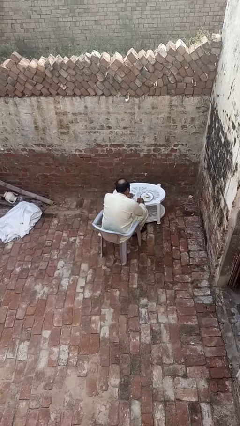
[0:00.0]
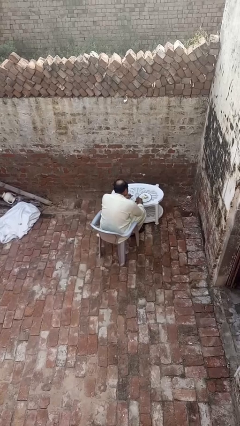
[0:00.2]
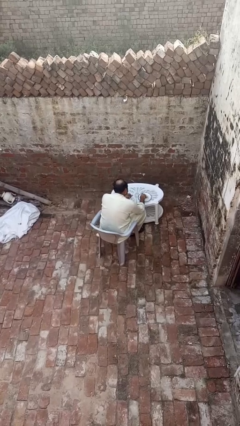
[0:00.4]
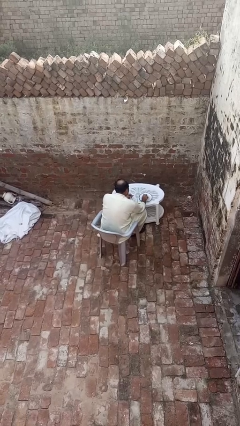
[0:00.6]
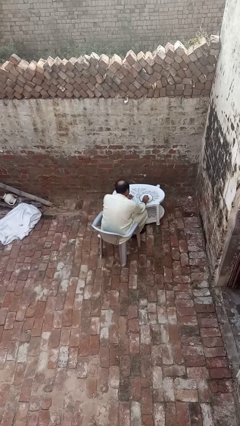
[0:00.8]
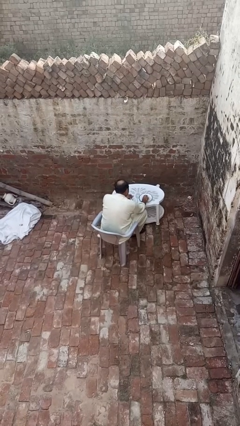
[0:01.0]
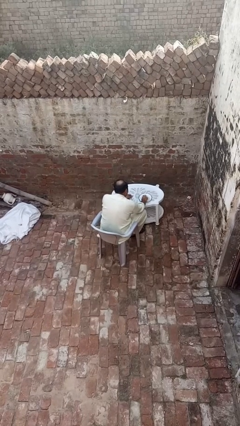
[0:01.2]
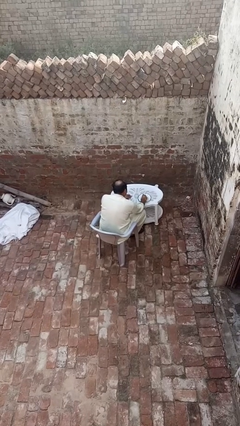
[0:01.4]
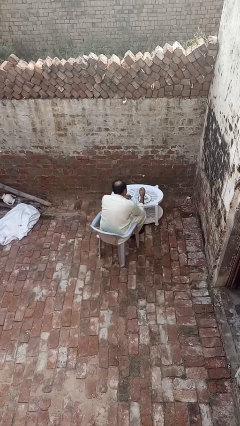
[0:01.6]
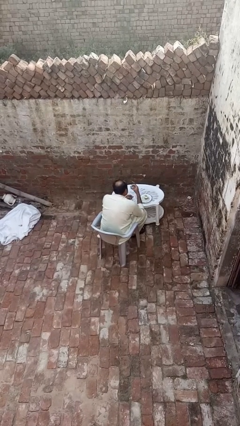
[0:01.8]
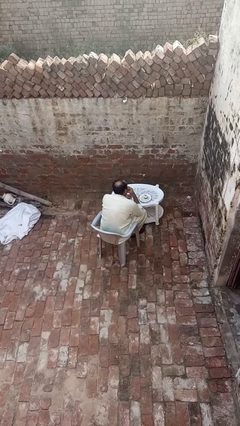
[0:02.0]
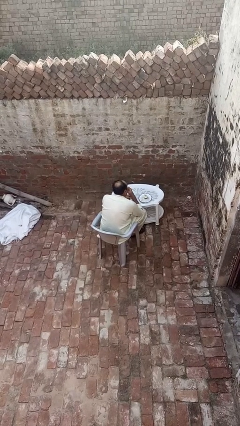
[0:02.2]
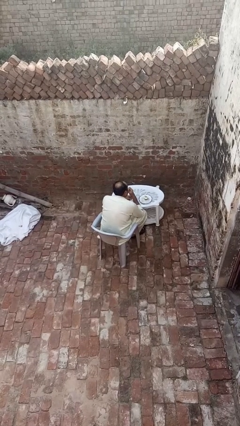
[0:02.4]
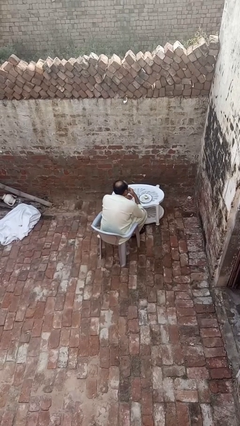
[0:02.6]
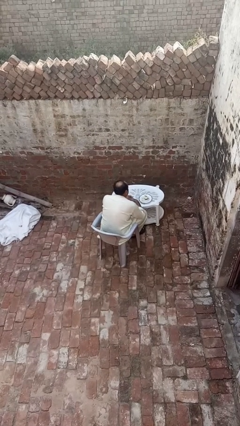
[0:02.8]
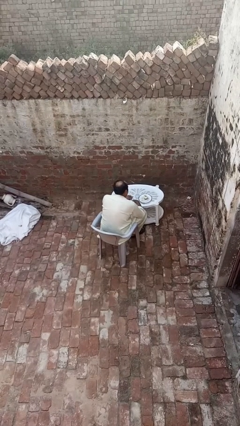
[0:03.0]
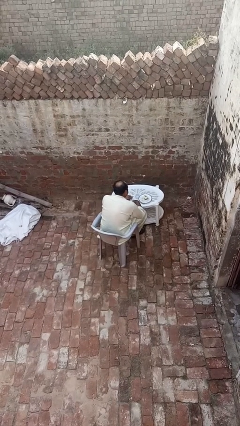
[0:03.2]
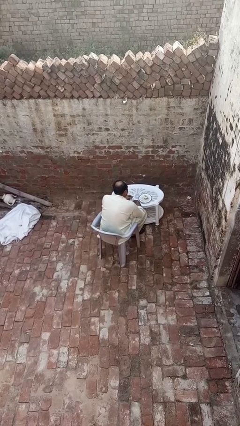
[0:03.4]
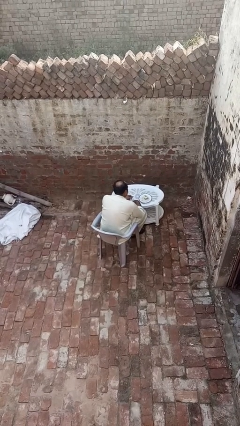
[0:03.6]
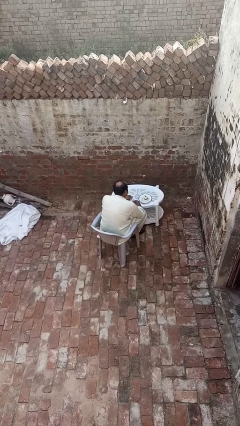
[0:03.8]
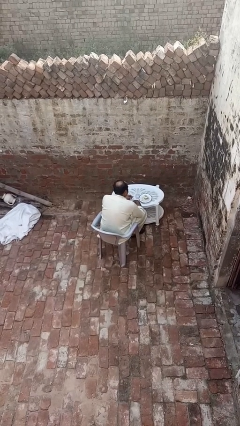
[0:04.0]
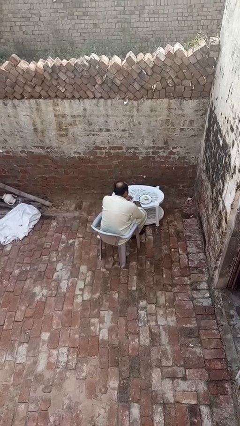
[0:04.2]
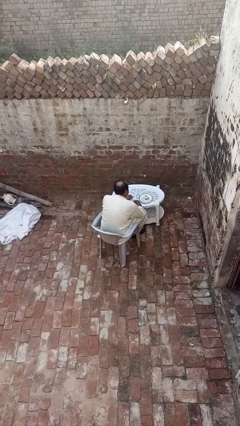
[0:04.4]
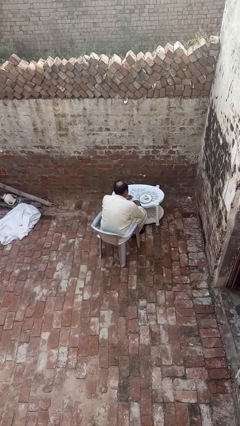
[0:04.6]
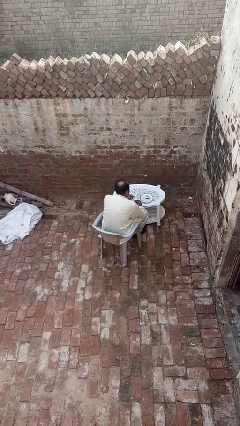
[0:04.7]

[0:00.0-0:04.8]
person eats with hands

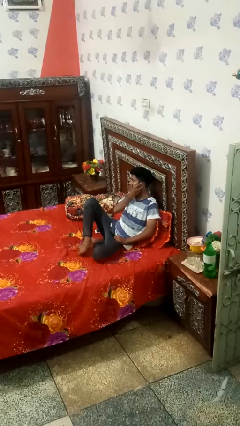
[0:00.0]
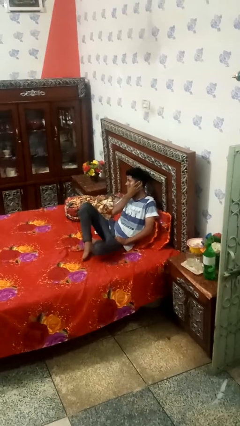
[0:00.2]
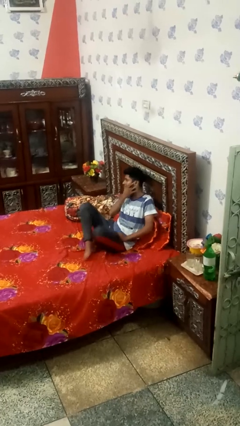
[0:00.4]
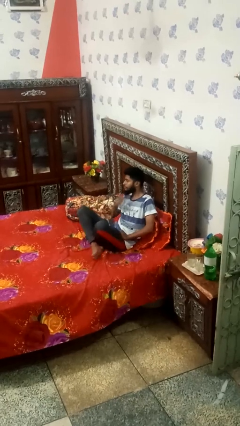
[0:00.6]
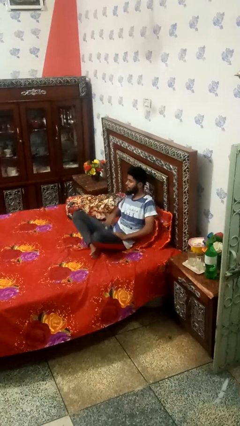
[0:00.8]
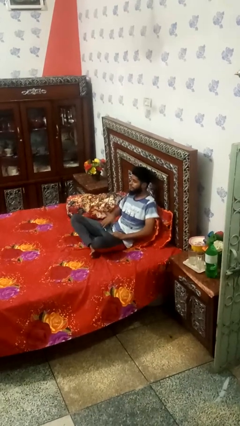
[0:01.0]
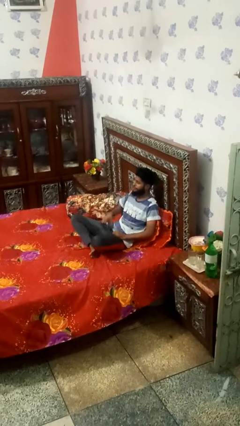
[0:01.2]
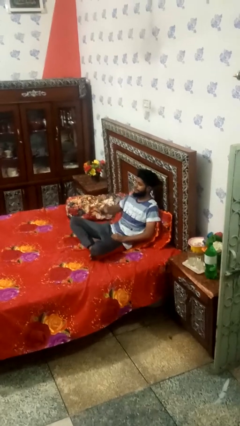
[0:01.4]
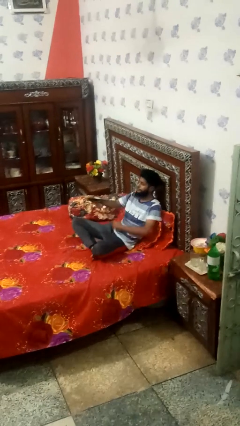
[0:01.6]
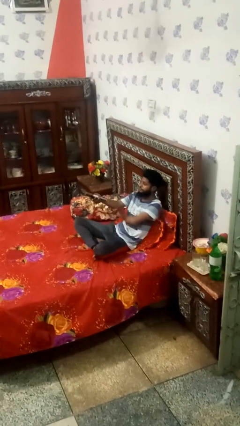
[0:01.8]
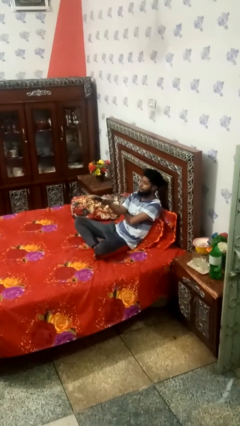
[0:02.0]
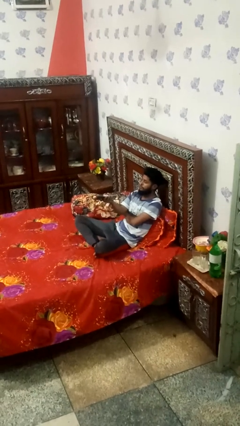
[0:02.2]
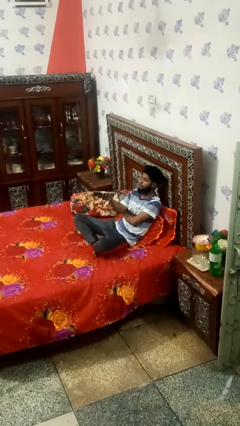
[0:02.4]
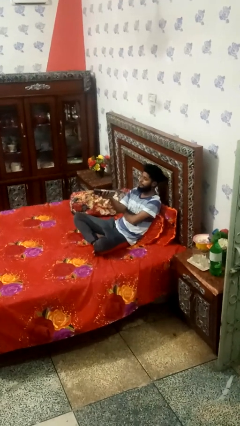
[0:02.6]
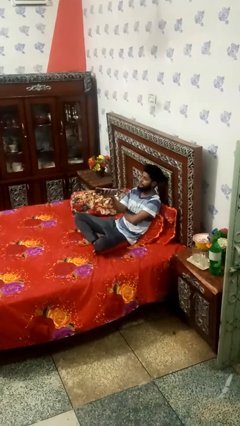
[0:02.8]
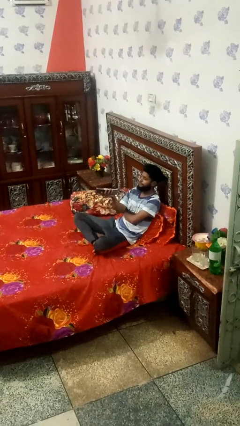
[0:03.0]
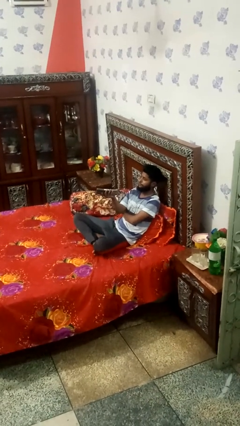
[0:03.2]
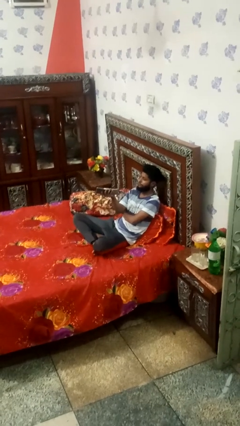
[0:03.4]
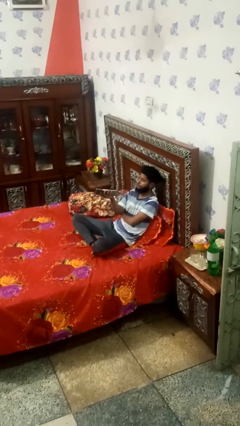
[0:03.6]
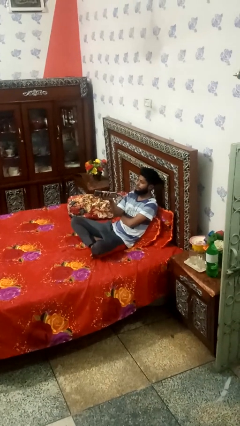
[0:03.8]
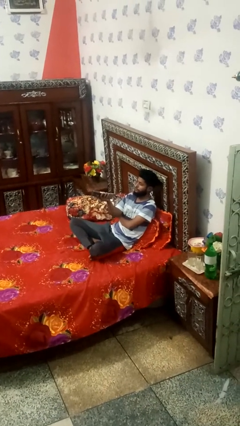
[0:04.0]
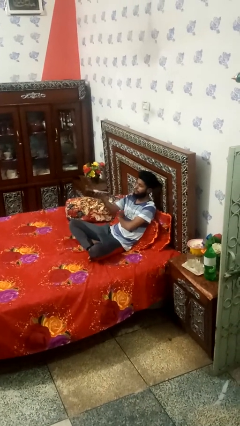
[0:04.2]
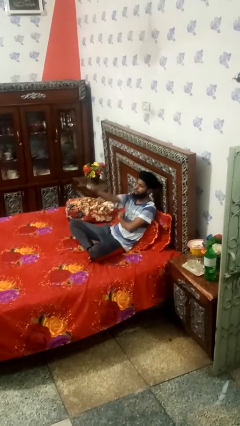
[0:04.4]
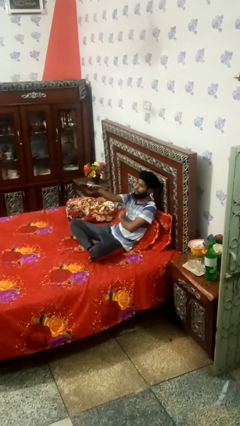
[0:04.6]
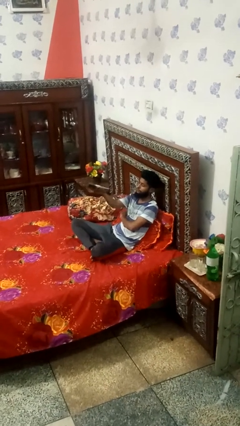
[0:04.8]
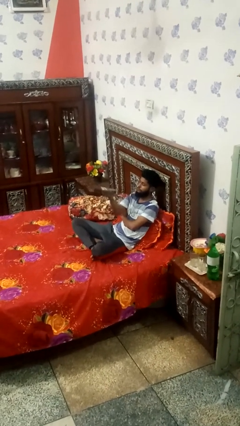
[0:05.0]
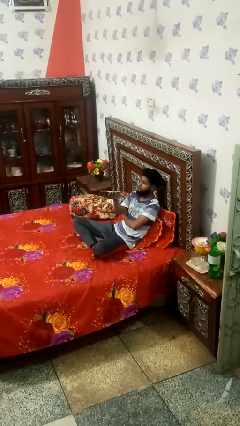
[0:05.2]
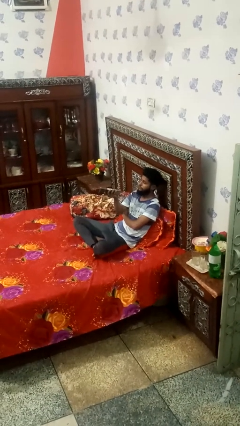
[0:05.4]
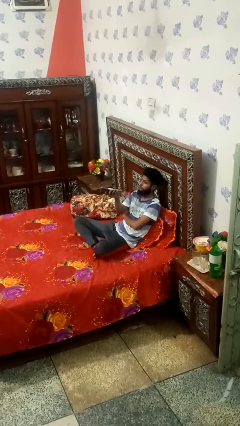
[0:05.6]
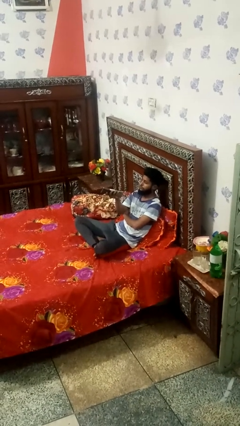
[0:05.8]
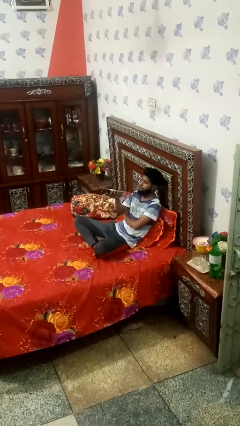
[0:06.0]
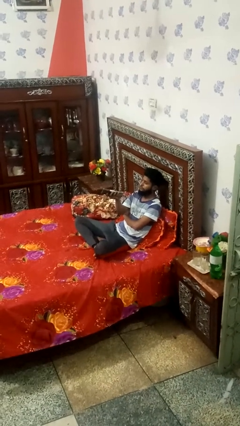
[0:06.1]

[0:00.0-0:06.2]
person uses television remote

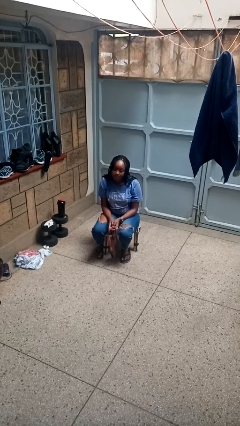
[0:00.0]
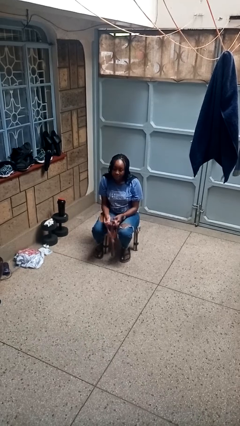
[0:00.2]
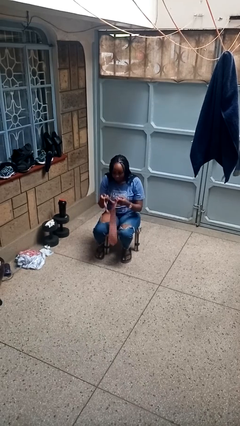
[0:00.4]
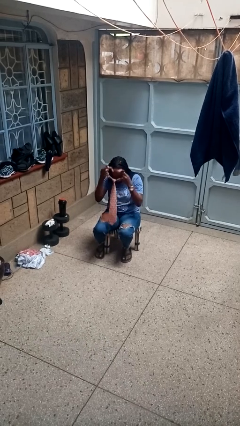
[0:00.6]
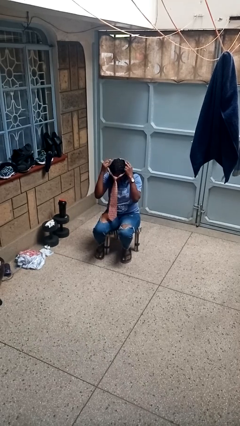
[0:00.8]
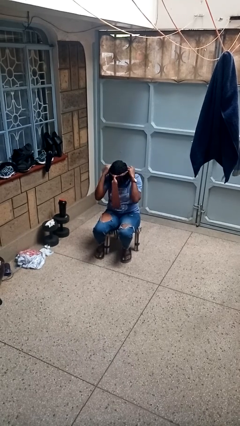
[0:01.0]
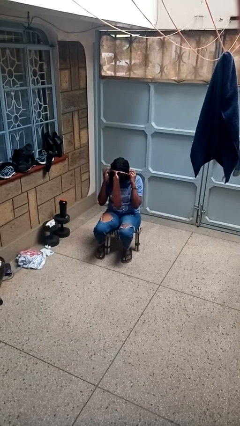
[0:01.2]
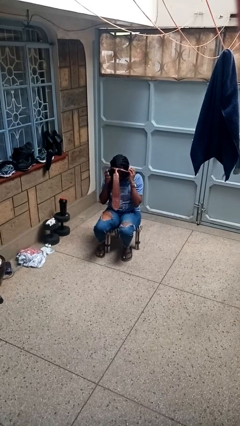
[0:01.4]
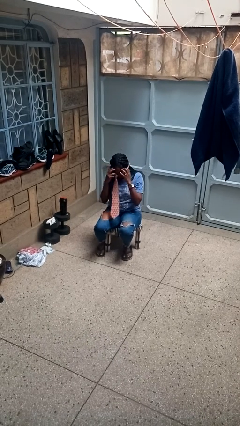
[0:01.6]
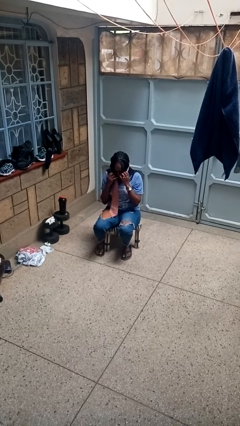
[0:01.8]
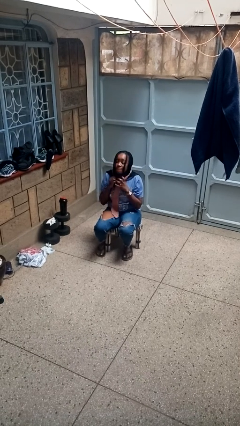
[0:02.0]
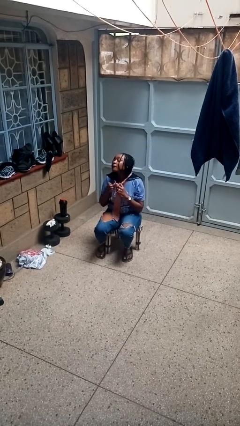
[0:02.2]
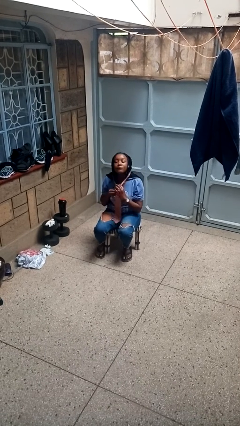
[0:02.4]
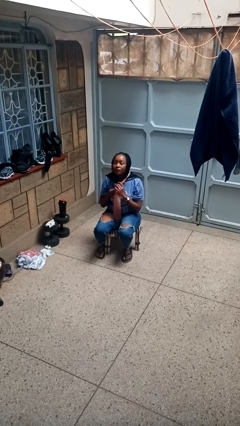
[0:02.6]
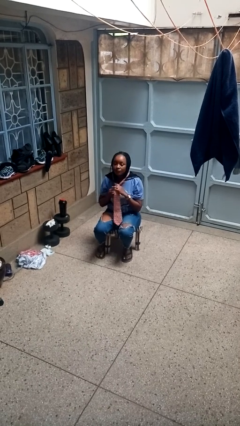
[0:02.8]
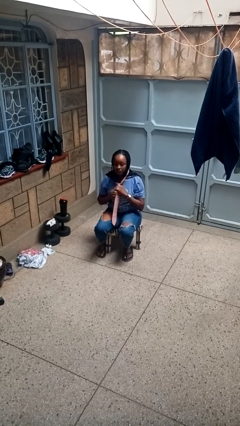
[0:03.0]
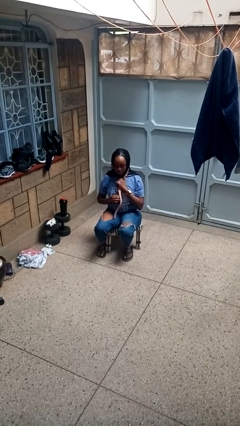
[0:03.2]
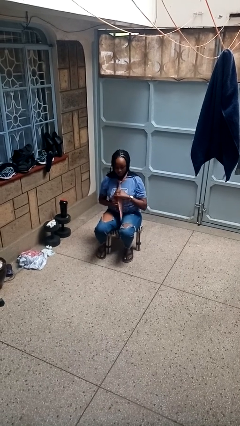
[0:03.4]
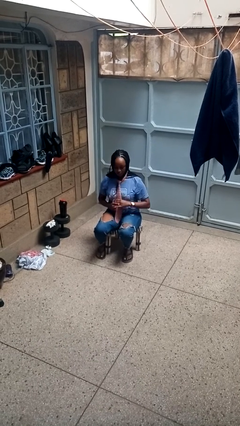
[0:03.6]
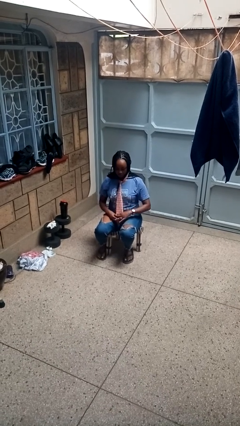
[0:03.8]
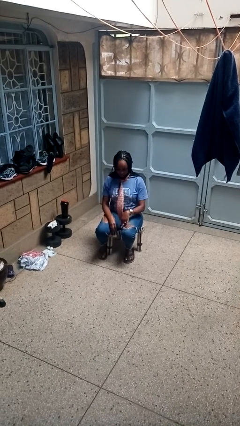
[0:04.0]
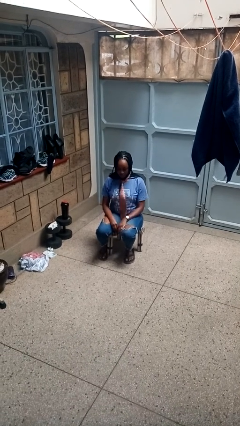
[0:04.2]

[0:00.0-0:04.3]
person puts on necktie

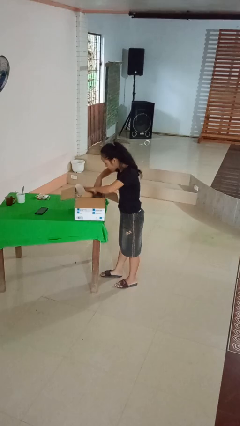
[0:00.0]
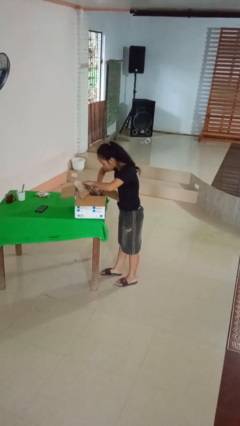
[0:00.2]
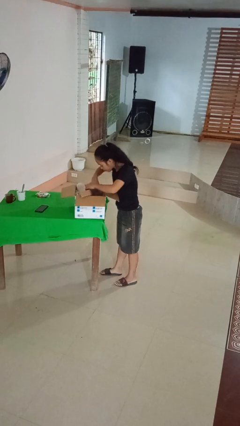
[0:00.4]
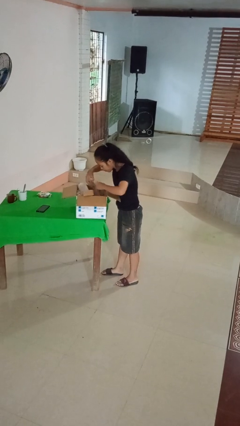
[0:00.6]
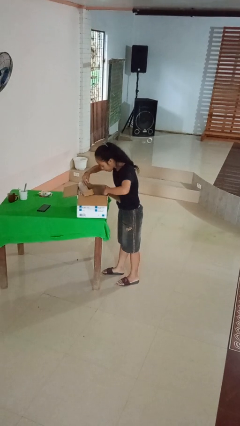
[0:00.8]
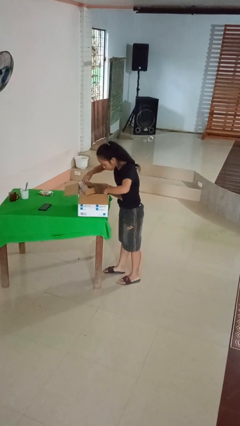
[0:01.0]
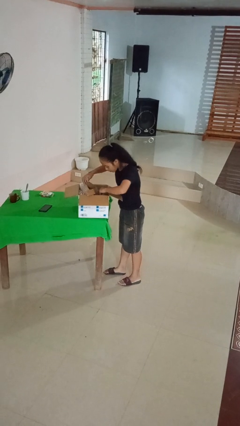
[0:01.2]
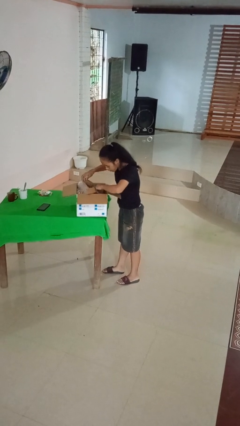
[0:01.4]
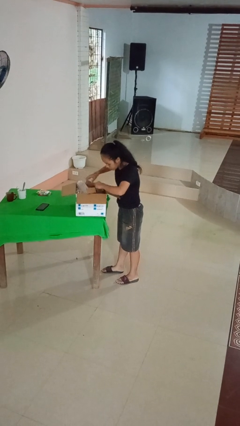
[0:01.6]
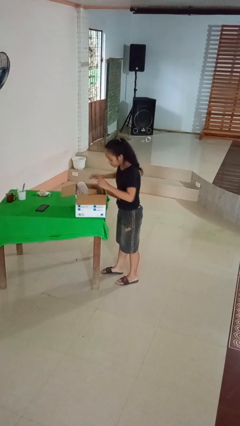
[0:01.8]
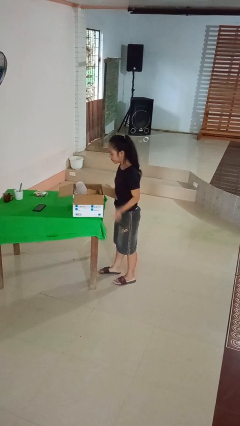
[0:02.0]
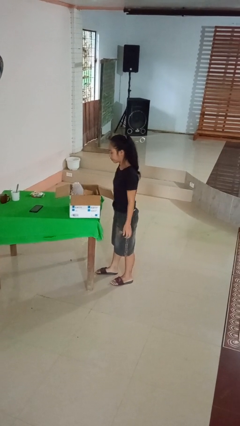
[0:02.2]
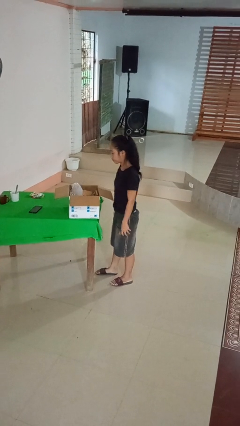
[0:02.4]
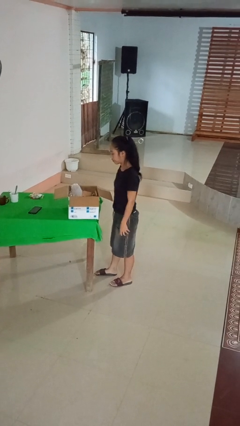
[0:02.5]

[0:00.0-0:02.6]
person searches in box
